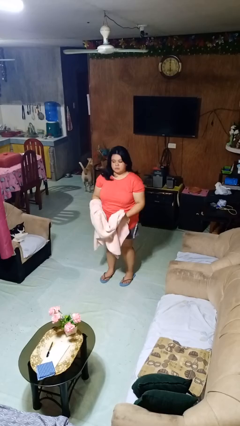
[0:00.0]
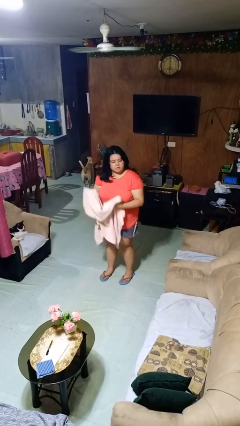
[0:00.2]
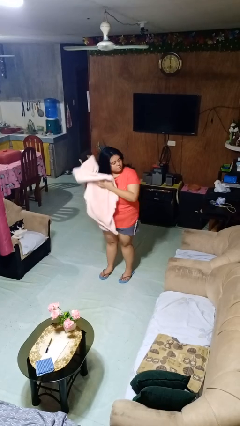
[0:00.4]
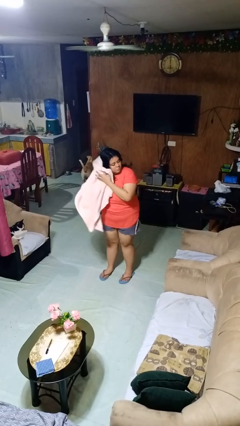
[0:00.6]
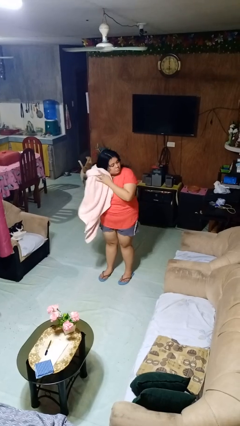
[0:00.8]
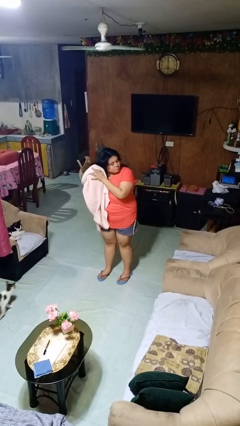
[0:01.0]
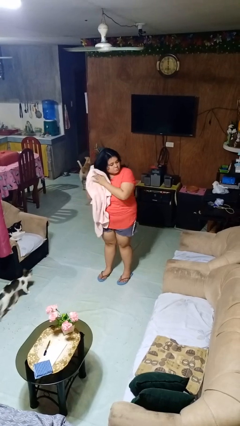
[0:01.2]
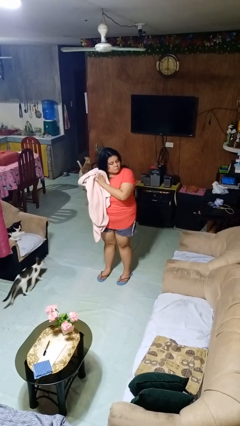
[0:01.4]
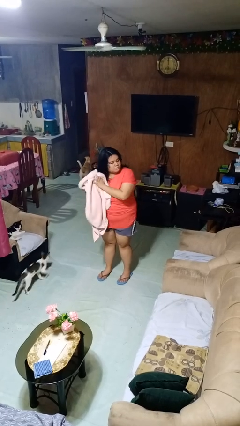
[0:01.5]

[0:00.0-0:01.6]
person dries hair with towel

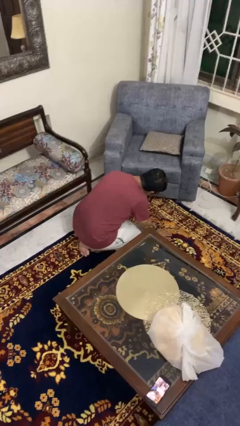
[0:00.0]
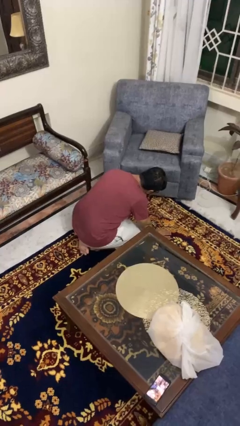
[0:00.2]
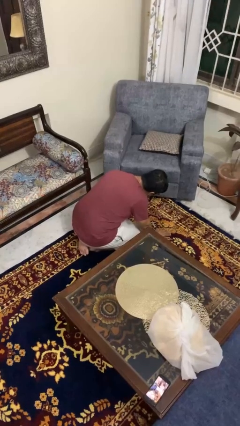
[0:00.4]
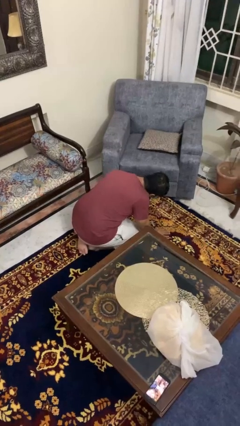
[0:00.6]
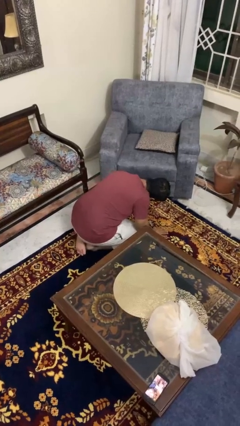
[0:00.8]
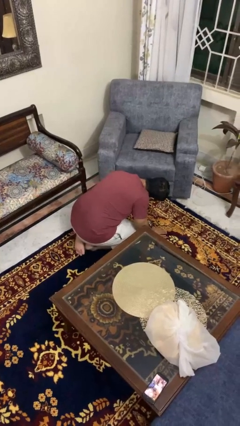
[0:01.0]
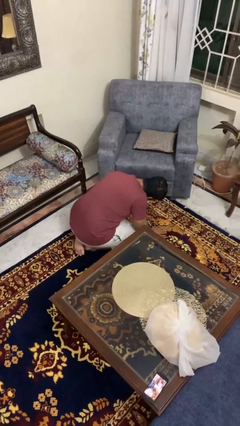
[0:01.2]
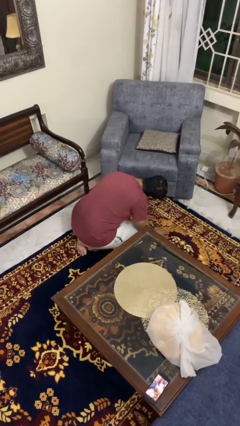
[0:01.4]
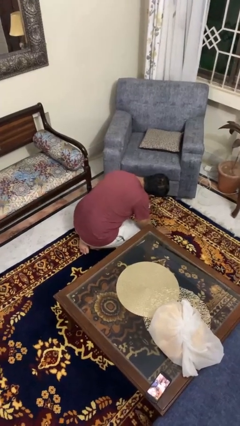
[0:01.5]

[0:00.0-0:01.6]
person searches under couch

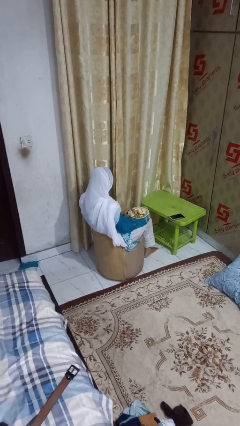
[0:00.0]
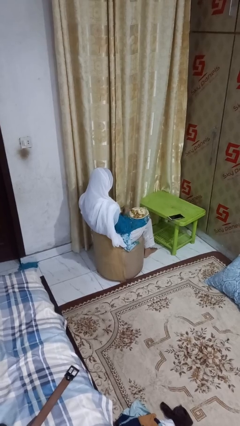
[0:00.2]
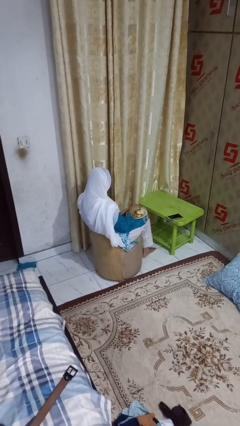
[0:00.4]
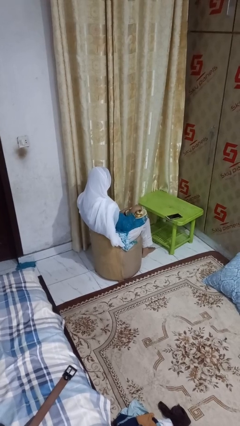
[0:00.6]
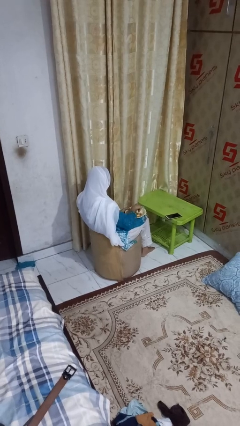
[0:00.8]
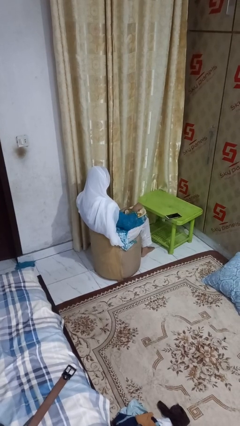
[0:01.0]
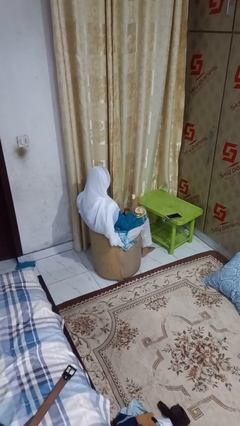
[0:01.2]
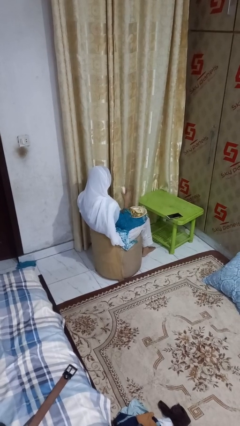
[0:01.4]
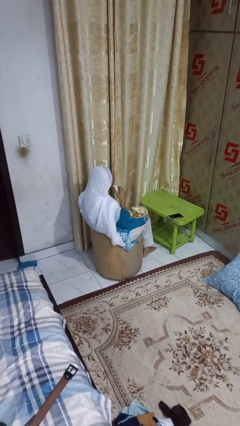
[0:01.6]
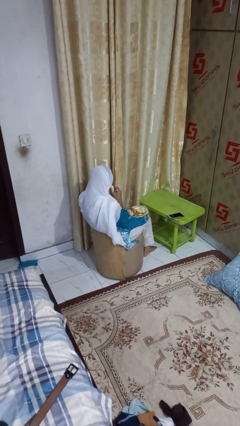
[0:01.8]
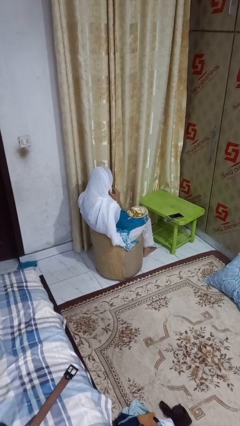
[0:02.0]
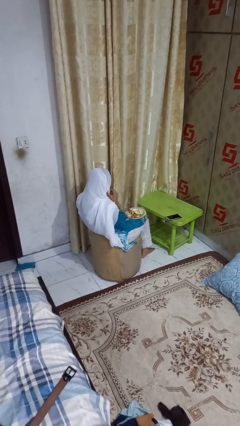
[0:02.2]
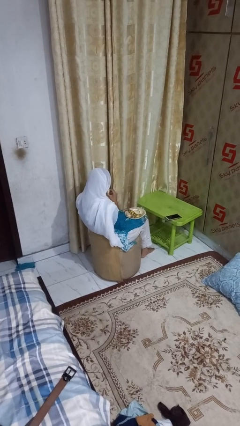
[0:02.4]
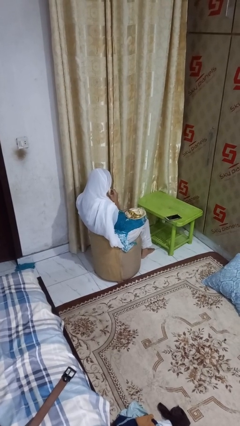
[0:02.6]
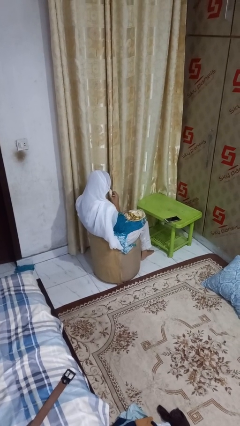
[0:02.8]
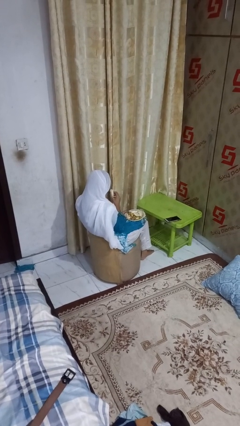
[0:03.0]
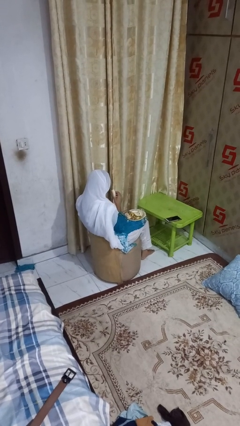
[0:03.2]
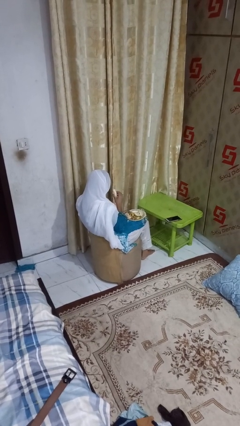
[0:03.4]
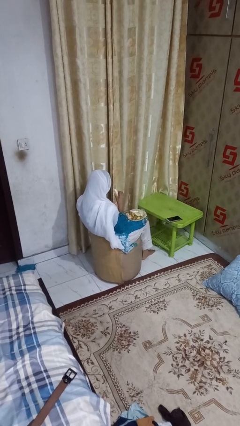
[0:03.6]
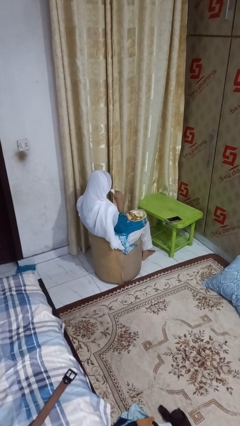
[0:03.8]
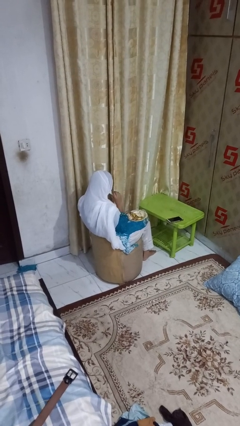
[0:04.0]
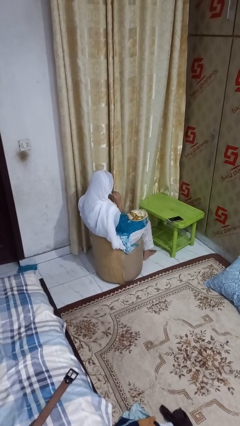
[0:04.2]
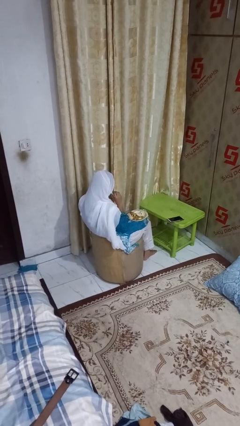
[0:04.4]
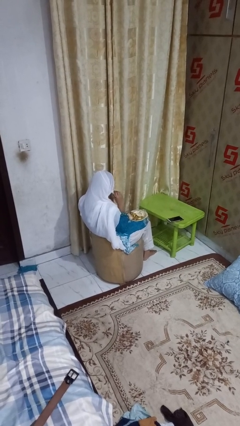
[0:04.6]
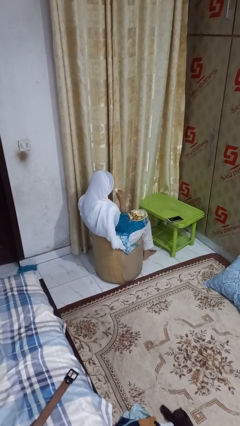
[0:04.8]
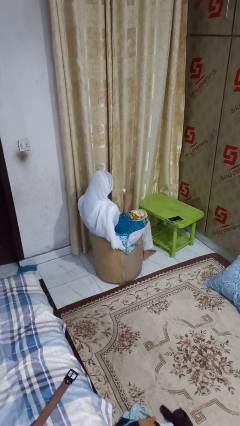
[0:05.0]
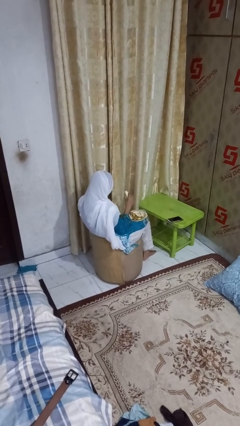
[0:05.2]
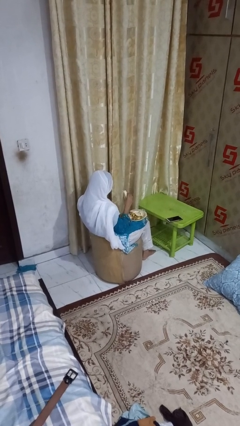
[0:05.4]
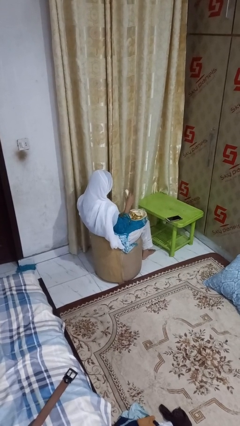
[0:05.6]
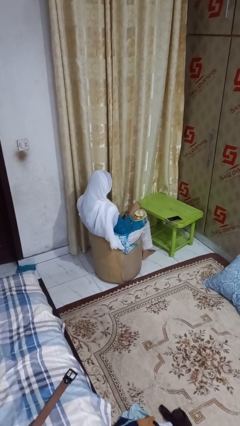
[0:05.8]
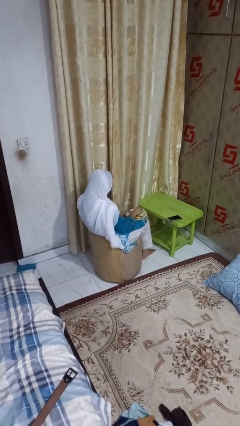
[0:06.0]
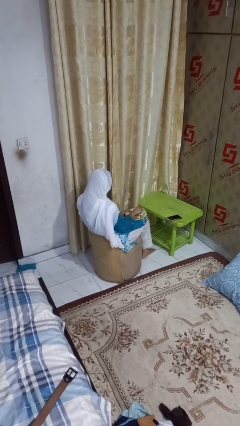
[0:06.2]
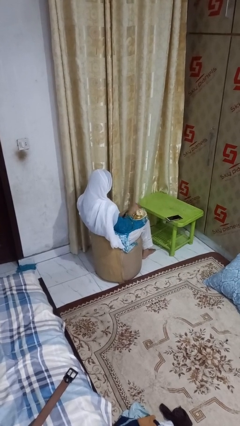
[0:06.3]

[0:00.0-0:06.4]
person eats with hands

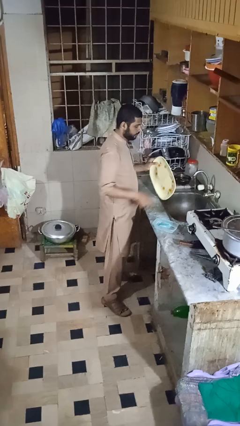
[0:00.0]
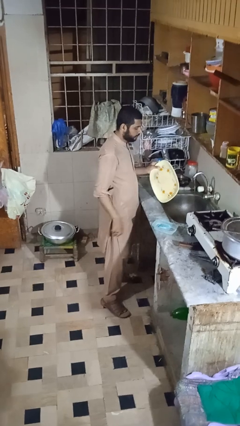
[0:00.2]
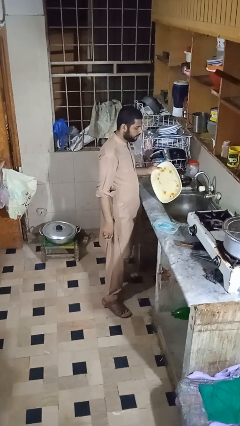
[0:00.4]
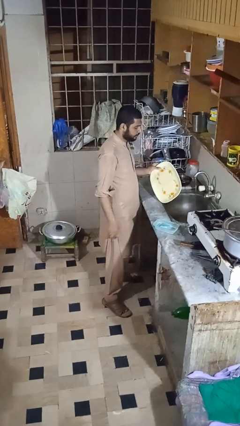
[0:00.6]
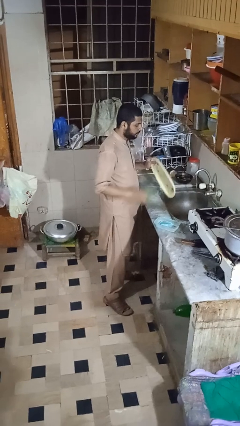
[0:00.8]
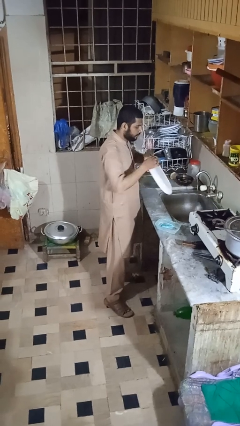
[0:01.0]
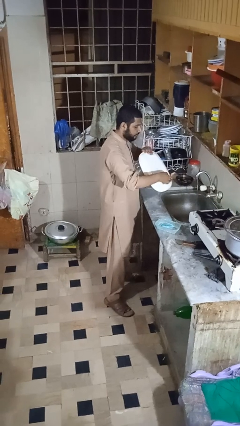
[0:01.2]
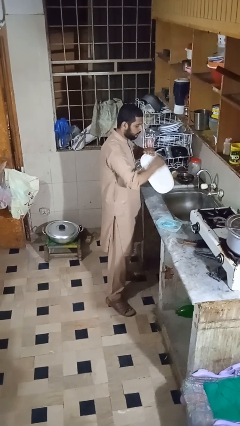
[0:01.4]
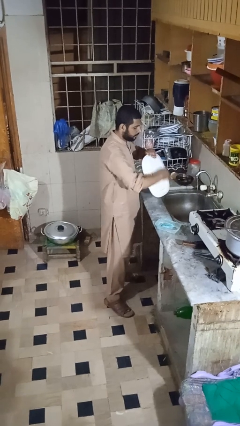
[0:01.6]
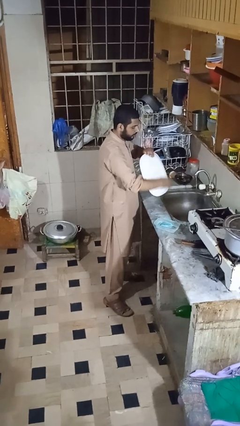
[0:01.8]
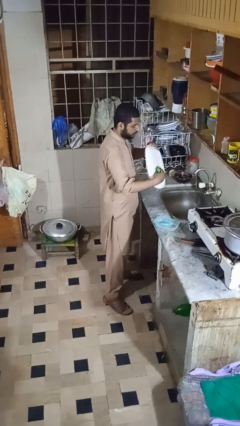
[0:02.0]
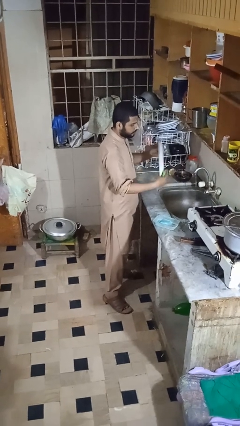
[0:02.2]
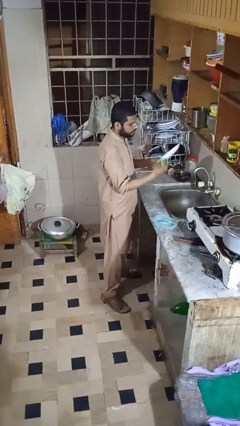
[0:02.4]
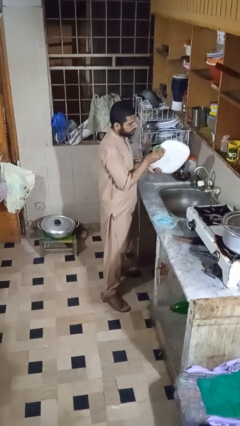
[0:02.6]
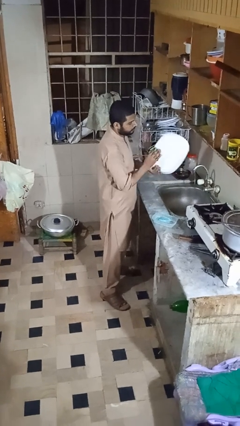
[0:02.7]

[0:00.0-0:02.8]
person washes dish

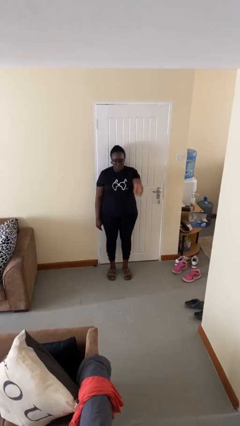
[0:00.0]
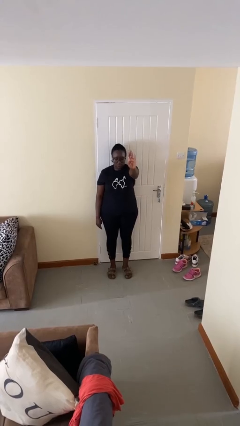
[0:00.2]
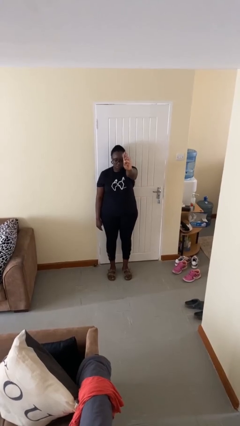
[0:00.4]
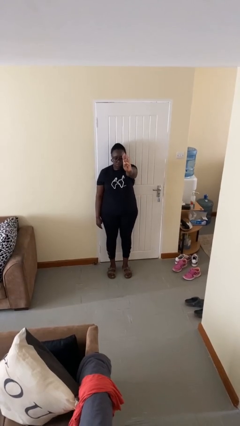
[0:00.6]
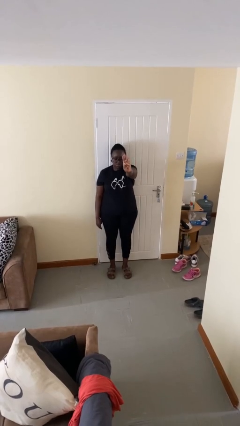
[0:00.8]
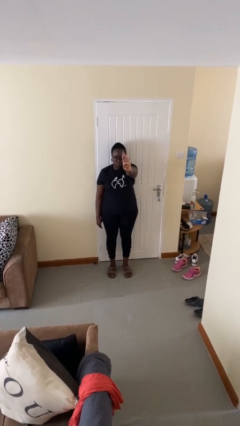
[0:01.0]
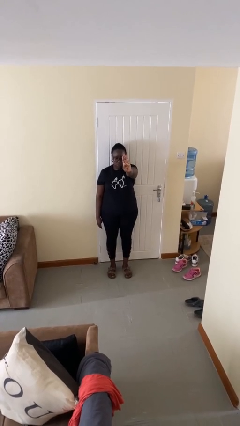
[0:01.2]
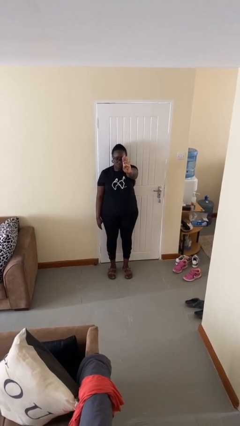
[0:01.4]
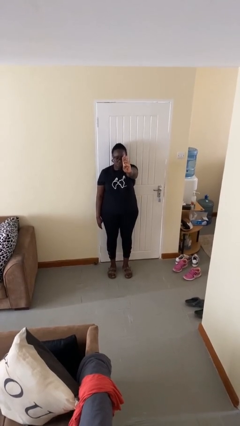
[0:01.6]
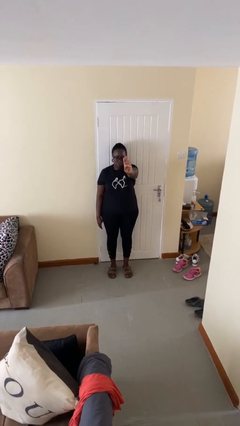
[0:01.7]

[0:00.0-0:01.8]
person gestures number four

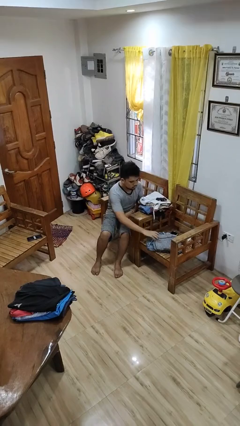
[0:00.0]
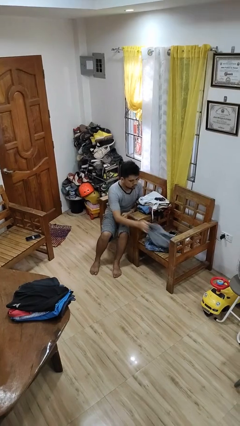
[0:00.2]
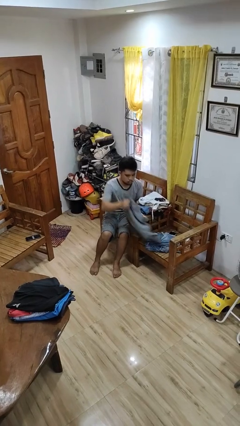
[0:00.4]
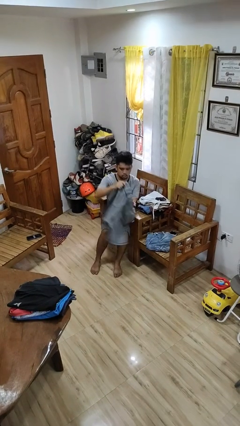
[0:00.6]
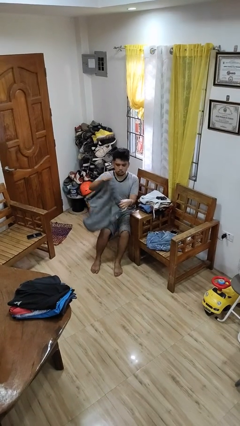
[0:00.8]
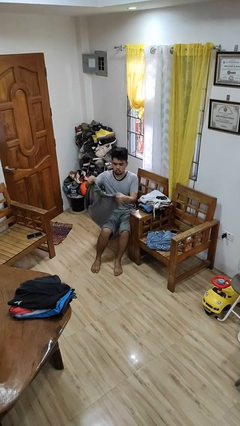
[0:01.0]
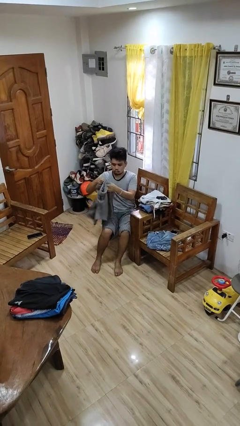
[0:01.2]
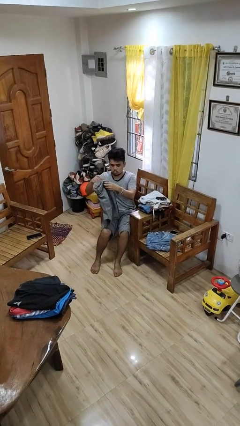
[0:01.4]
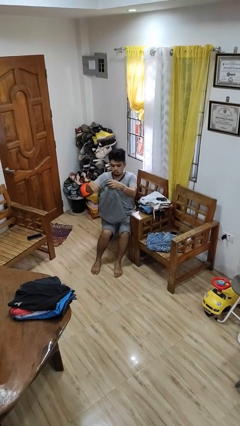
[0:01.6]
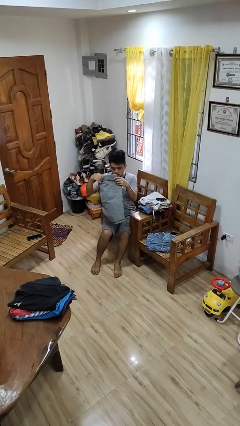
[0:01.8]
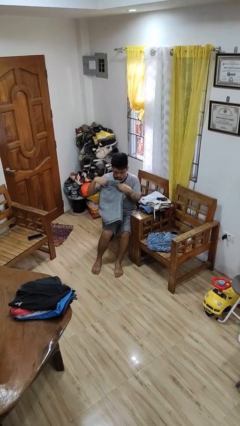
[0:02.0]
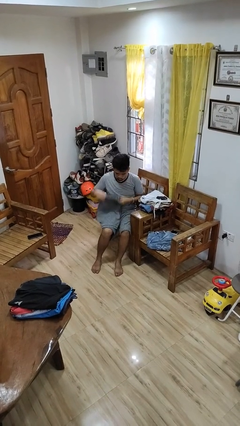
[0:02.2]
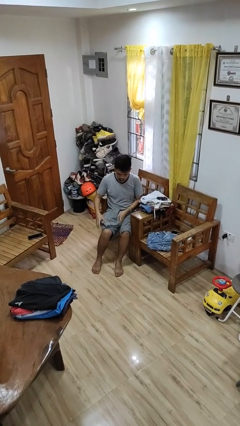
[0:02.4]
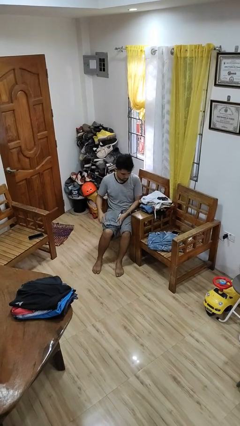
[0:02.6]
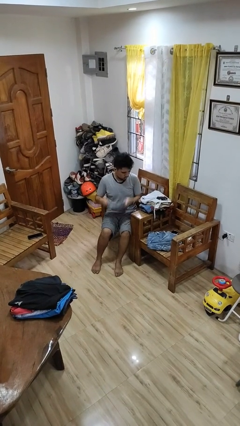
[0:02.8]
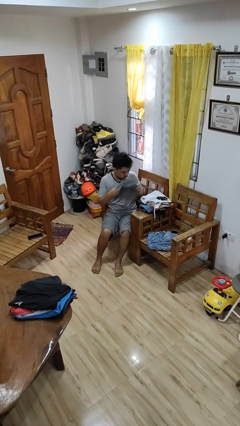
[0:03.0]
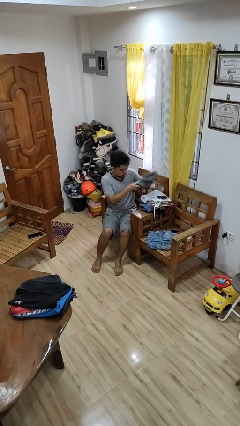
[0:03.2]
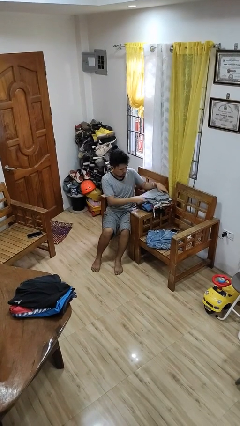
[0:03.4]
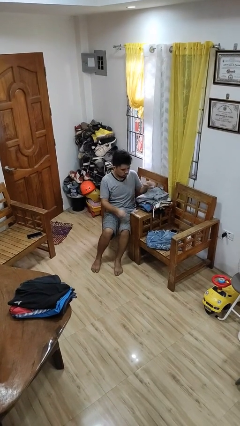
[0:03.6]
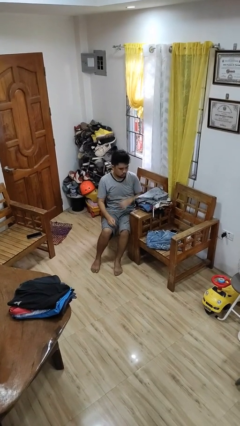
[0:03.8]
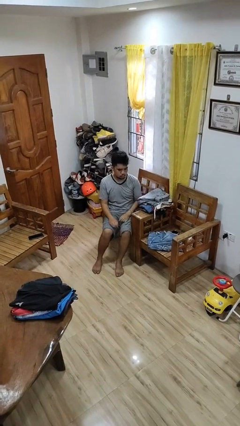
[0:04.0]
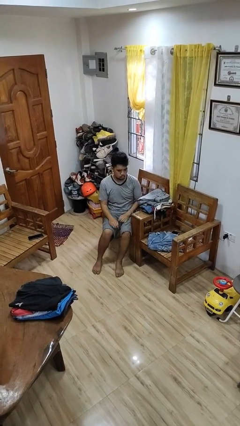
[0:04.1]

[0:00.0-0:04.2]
person folds pants
